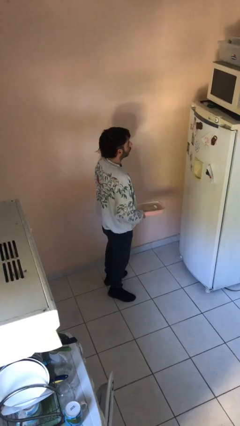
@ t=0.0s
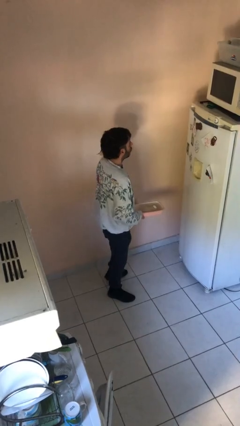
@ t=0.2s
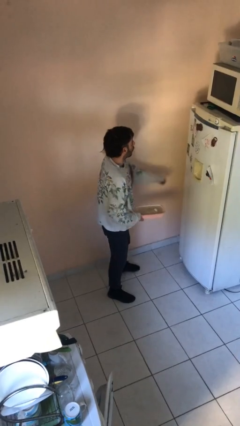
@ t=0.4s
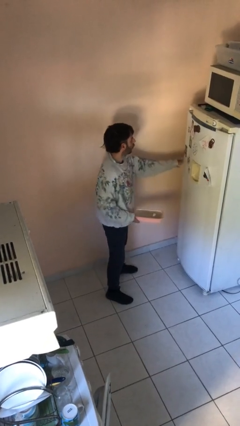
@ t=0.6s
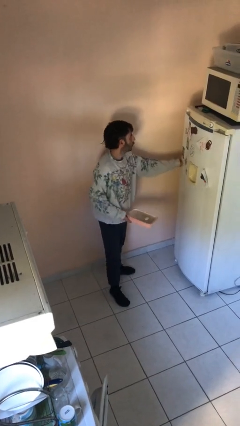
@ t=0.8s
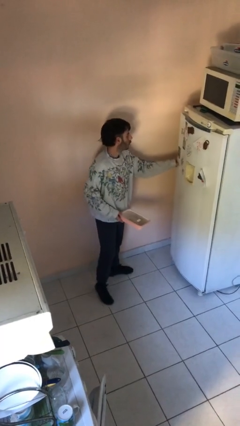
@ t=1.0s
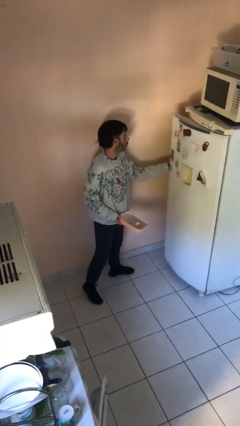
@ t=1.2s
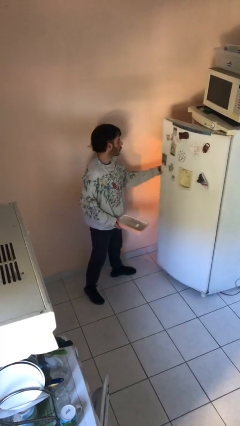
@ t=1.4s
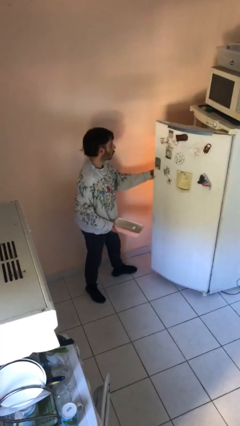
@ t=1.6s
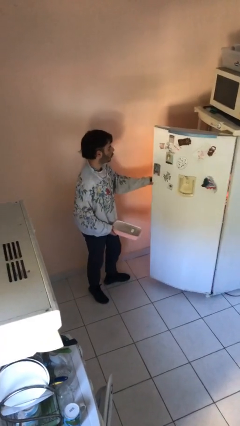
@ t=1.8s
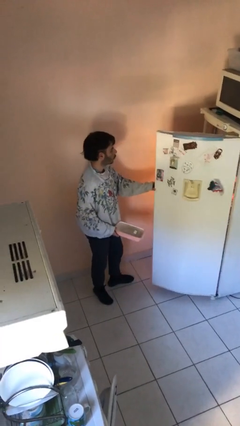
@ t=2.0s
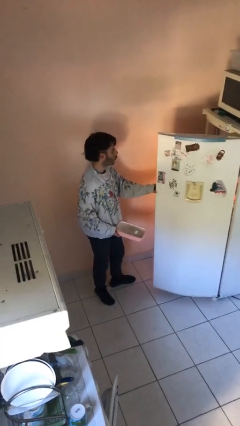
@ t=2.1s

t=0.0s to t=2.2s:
person opens refrigerator

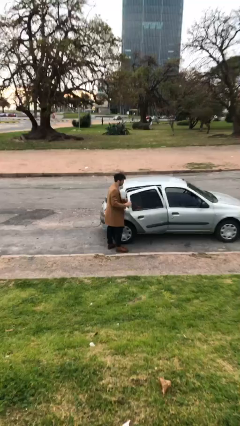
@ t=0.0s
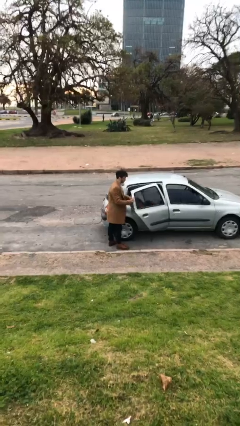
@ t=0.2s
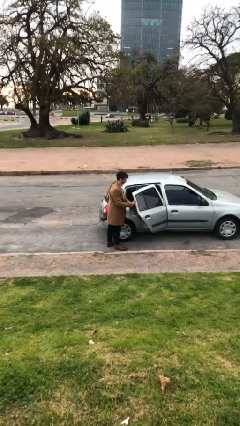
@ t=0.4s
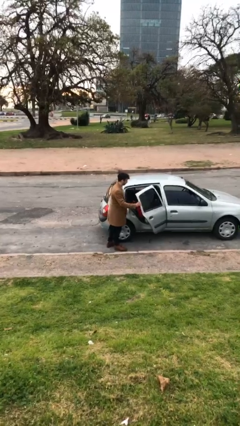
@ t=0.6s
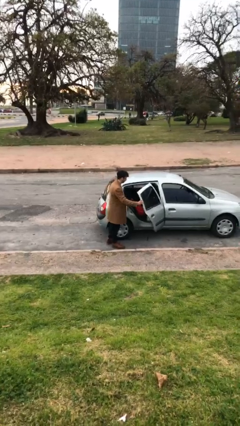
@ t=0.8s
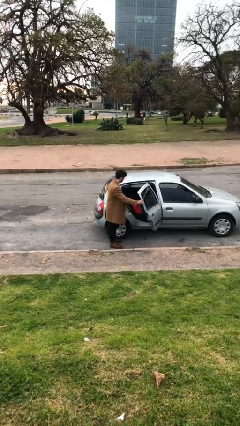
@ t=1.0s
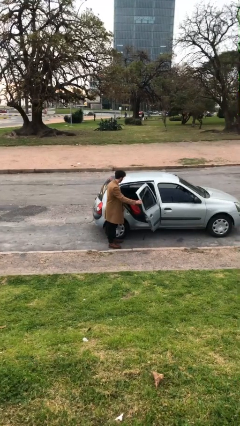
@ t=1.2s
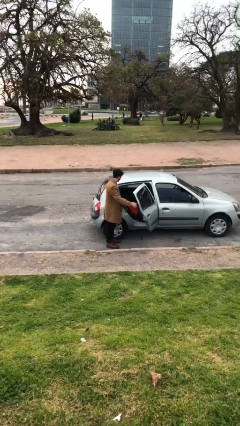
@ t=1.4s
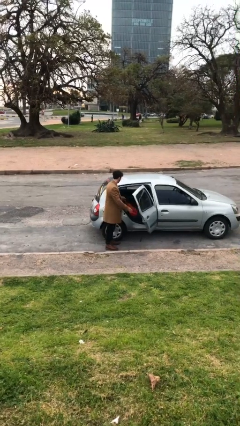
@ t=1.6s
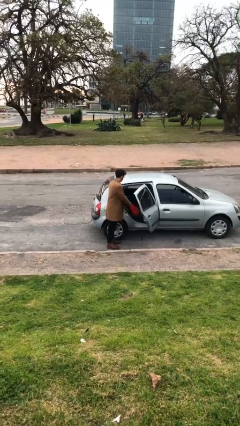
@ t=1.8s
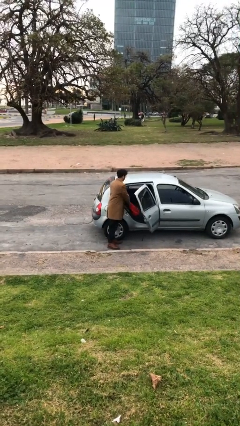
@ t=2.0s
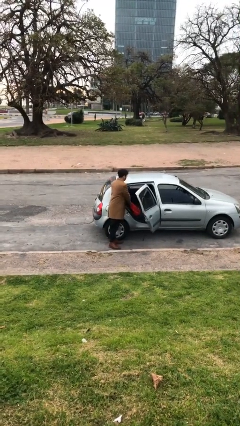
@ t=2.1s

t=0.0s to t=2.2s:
person opens car door

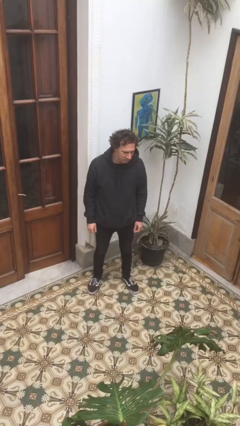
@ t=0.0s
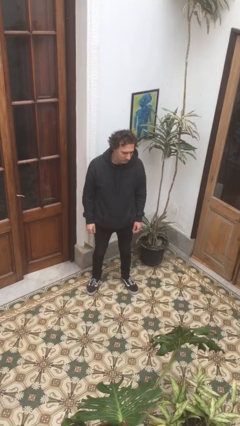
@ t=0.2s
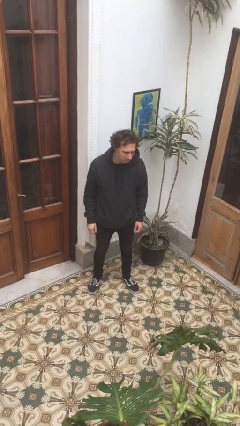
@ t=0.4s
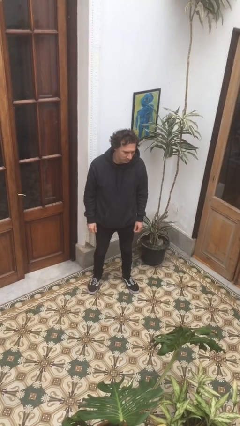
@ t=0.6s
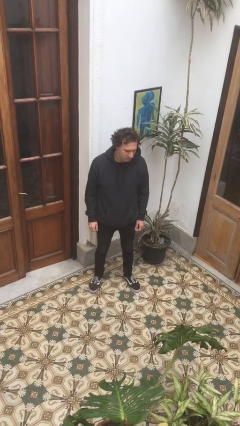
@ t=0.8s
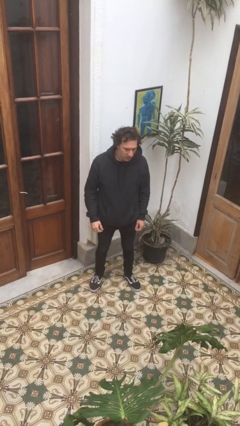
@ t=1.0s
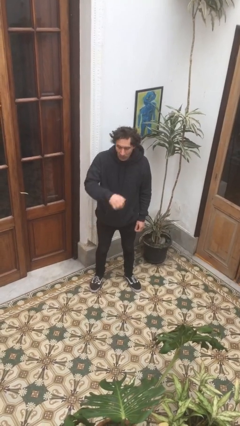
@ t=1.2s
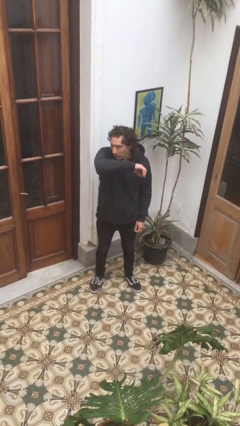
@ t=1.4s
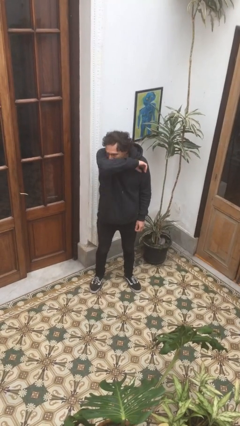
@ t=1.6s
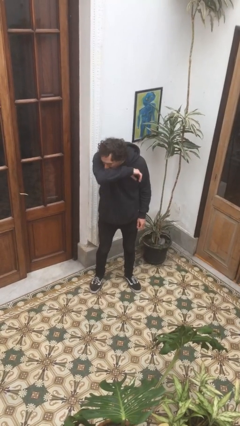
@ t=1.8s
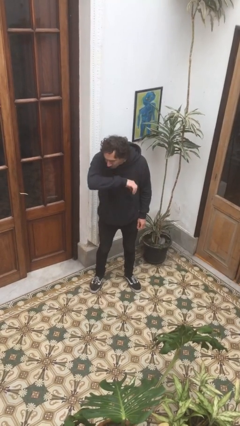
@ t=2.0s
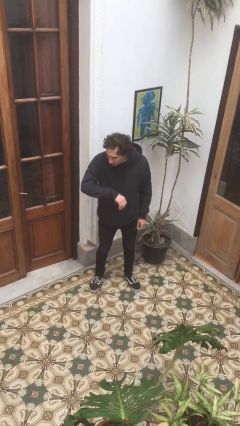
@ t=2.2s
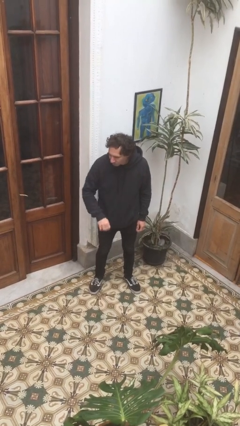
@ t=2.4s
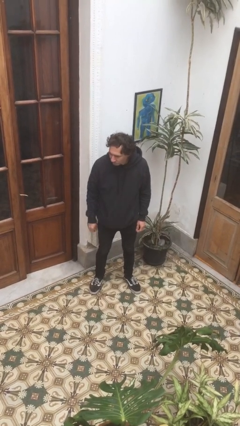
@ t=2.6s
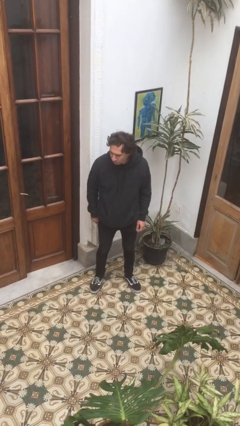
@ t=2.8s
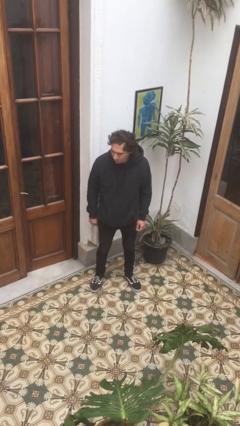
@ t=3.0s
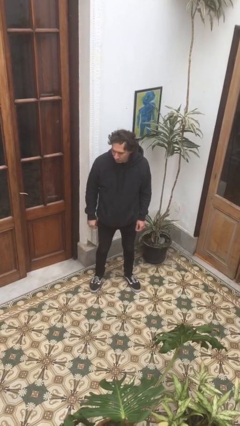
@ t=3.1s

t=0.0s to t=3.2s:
person sneezes into arm

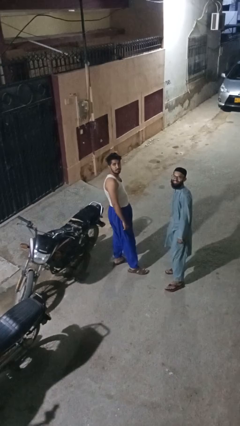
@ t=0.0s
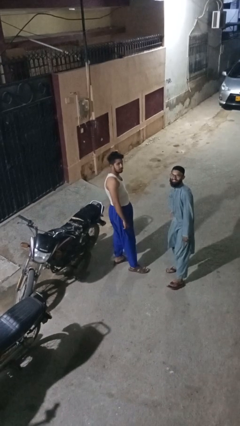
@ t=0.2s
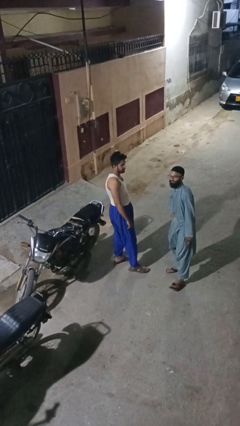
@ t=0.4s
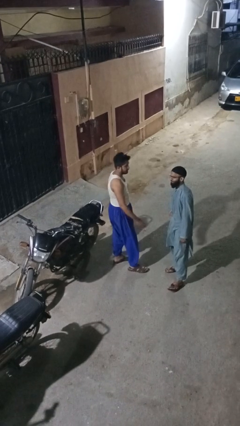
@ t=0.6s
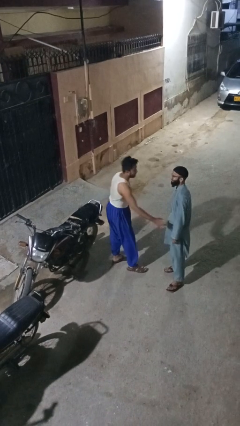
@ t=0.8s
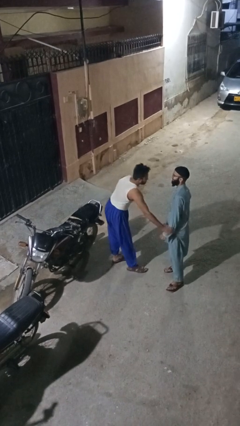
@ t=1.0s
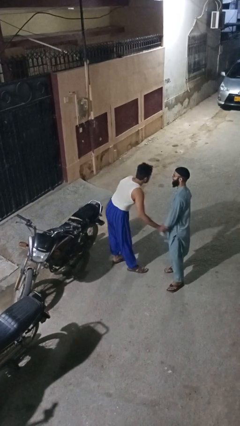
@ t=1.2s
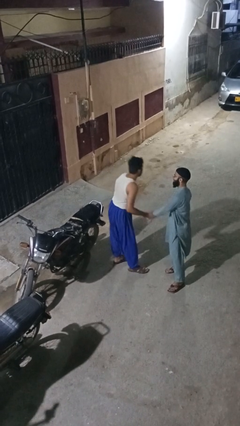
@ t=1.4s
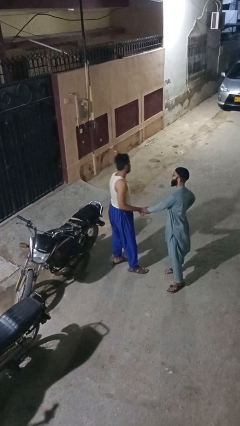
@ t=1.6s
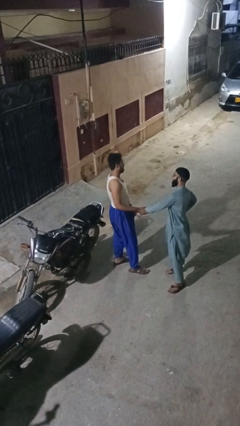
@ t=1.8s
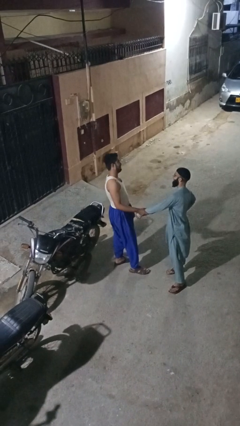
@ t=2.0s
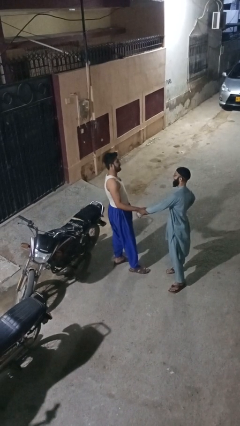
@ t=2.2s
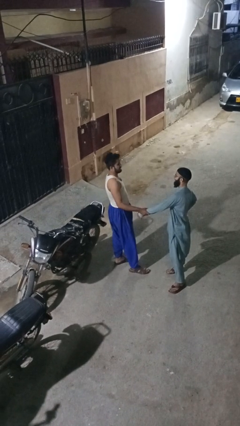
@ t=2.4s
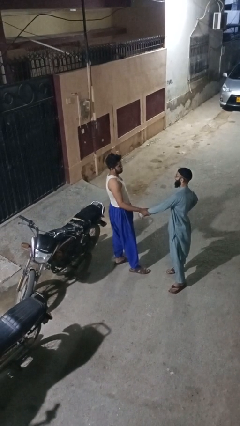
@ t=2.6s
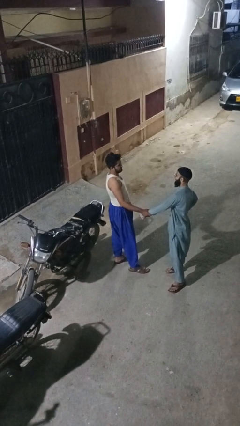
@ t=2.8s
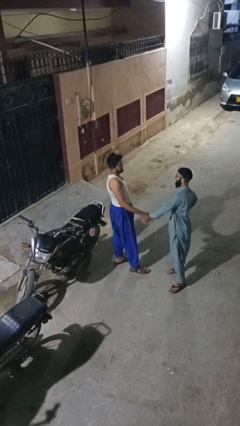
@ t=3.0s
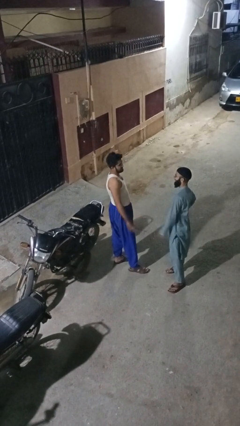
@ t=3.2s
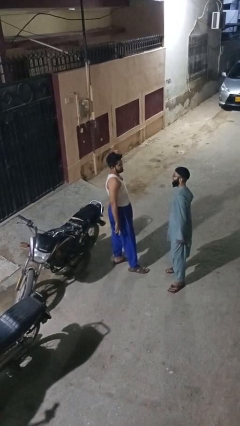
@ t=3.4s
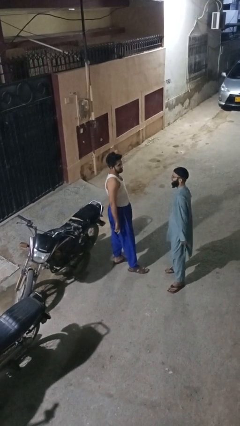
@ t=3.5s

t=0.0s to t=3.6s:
person grabs person by forearm

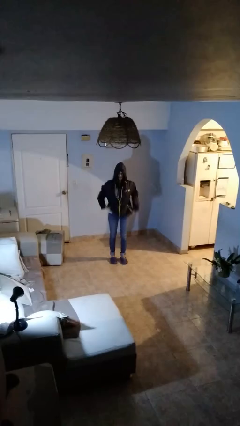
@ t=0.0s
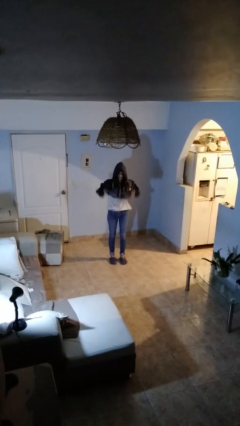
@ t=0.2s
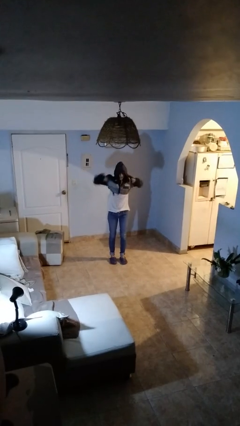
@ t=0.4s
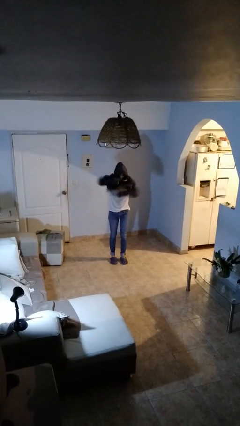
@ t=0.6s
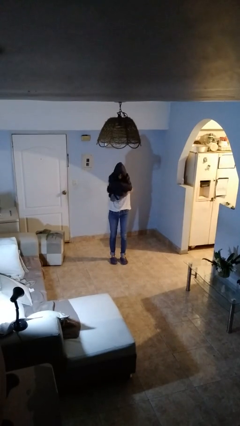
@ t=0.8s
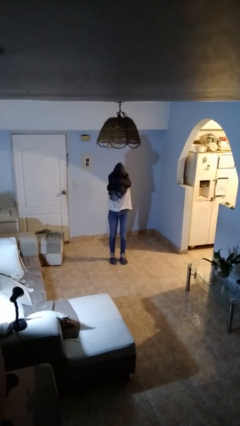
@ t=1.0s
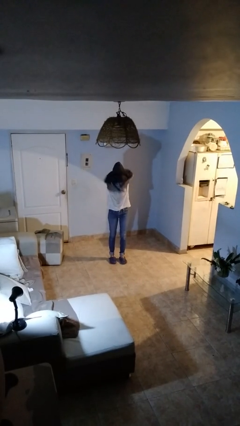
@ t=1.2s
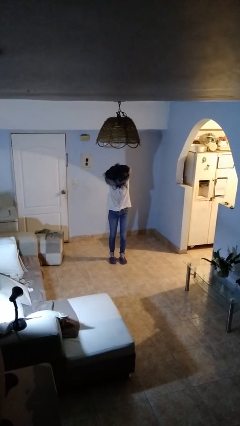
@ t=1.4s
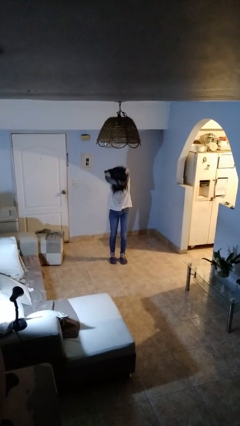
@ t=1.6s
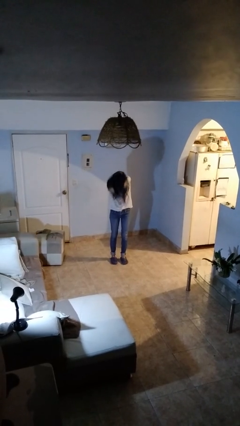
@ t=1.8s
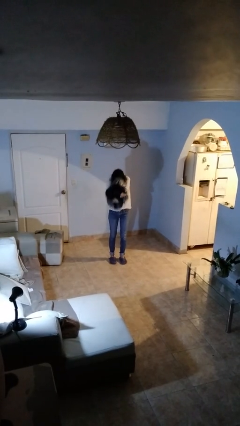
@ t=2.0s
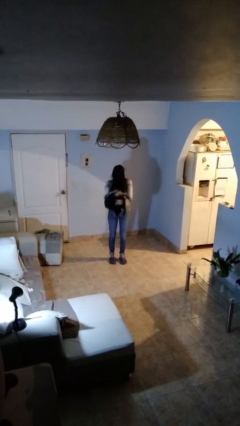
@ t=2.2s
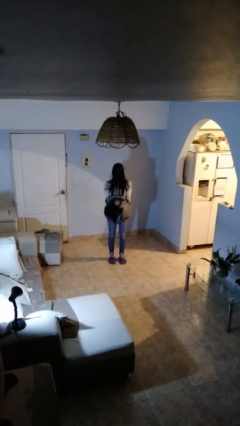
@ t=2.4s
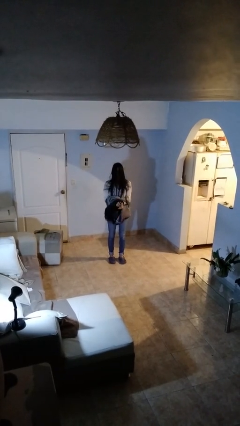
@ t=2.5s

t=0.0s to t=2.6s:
person takes off hoodie

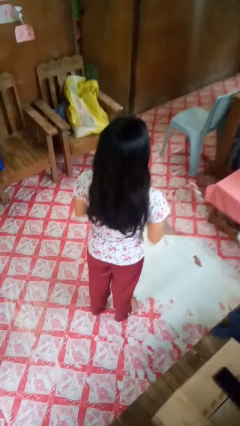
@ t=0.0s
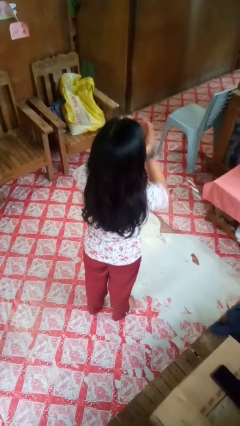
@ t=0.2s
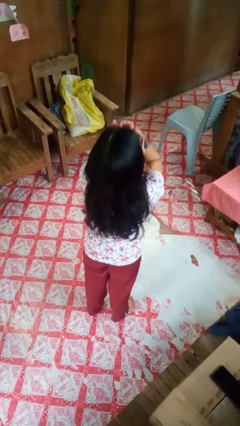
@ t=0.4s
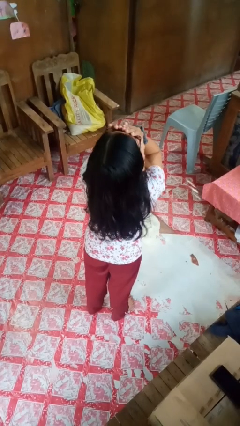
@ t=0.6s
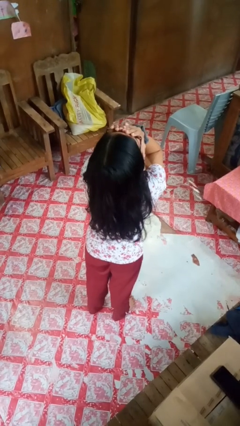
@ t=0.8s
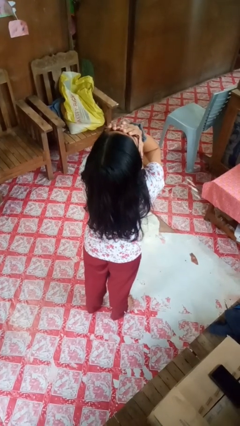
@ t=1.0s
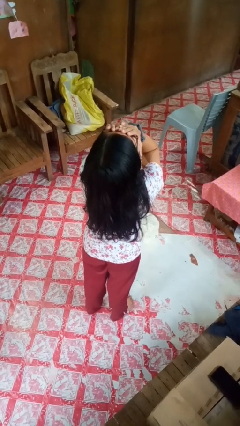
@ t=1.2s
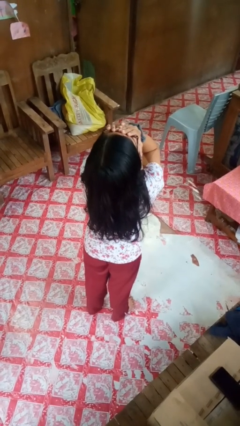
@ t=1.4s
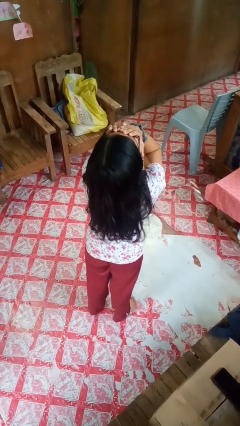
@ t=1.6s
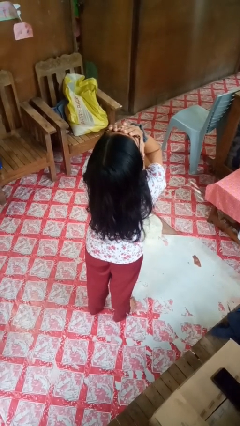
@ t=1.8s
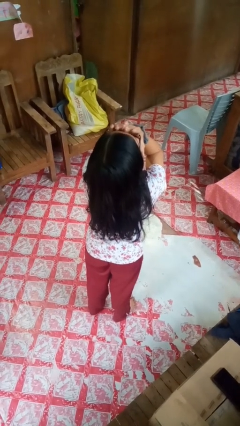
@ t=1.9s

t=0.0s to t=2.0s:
person covers face with hands

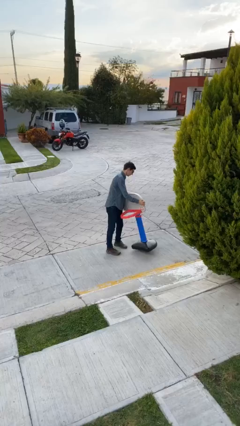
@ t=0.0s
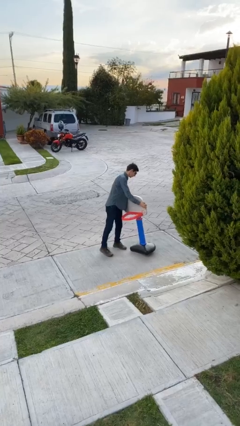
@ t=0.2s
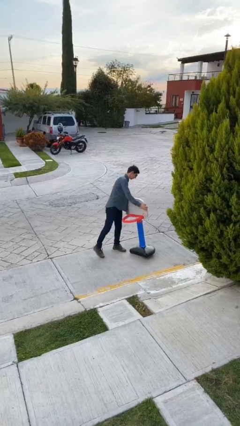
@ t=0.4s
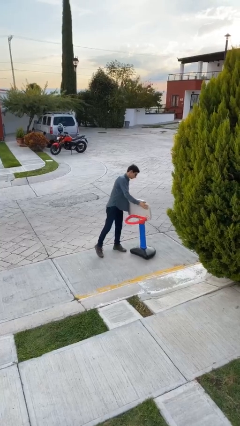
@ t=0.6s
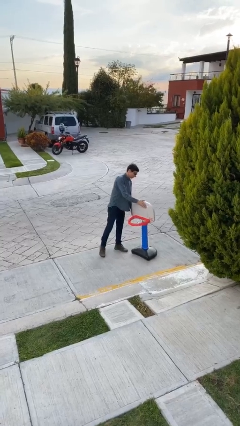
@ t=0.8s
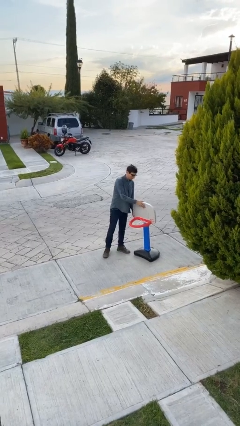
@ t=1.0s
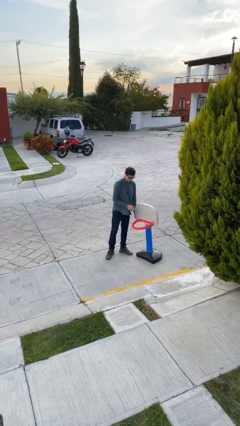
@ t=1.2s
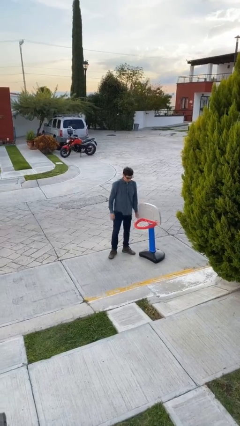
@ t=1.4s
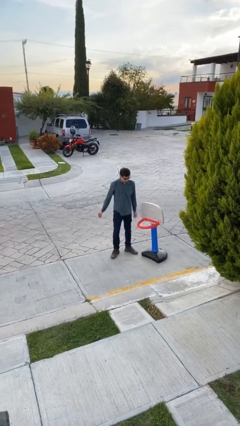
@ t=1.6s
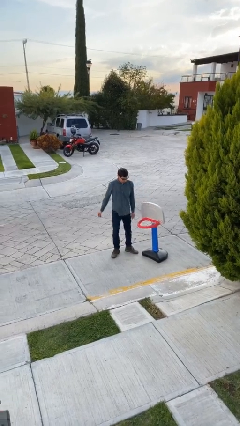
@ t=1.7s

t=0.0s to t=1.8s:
person puts down object on floor
